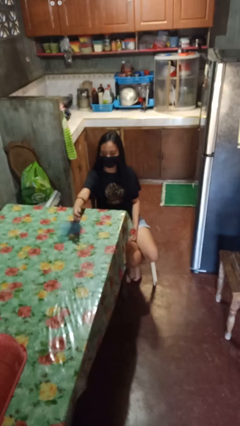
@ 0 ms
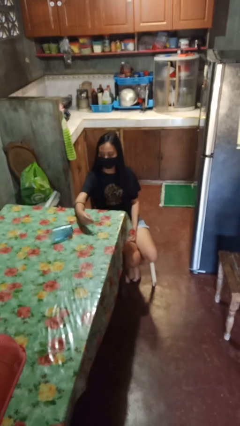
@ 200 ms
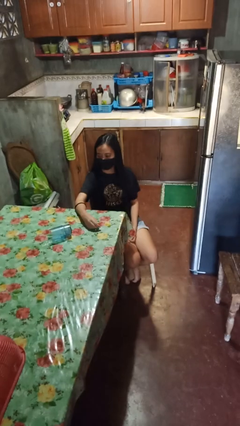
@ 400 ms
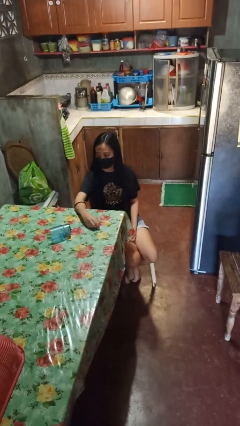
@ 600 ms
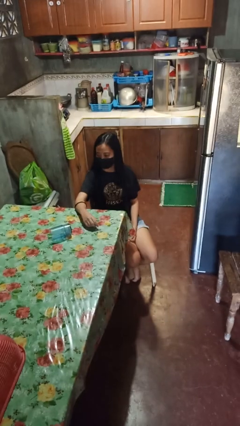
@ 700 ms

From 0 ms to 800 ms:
person spills on table

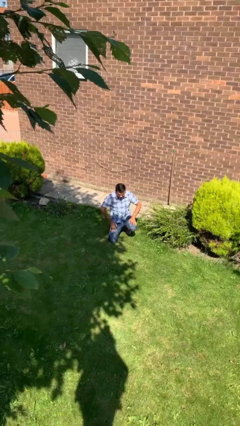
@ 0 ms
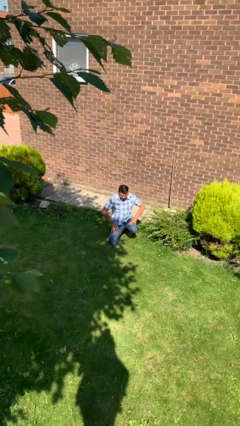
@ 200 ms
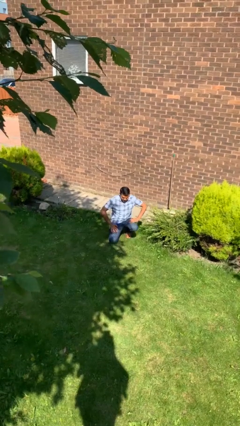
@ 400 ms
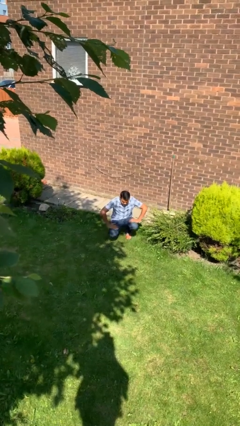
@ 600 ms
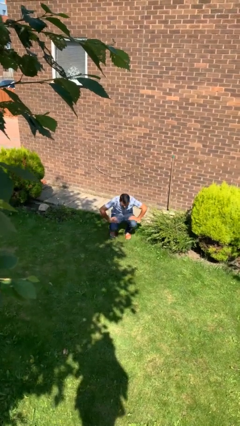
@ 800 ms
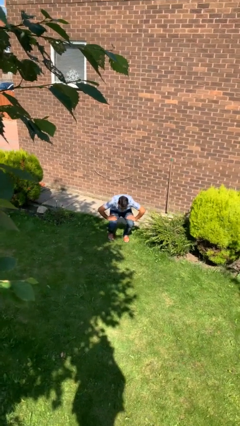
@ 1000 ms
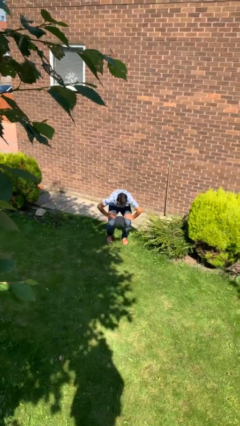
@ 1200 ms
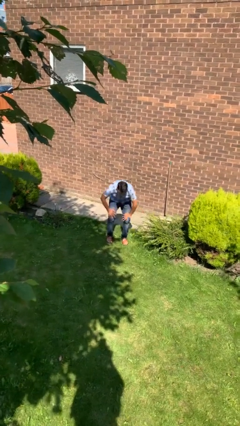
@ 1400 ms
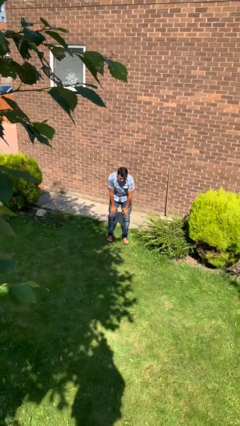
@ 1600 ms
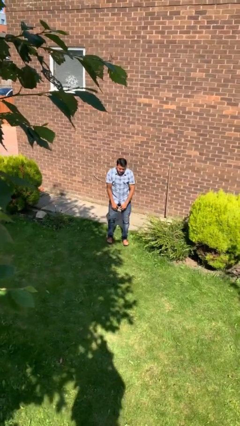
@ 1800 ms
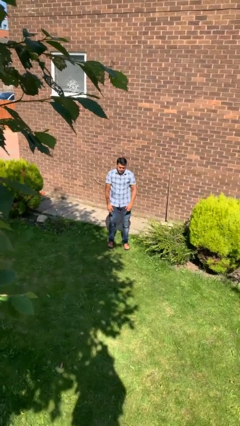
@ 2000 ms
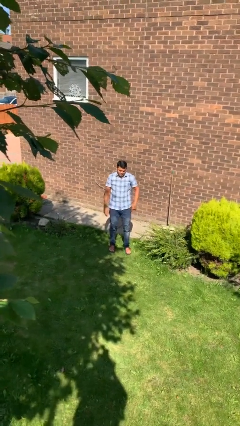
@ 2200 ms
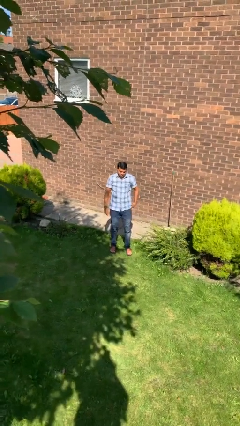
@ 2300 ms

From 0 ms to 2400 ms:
person stands up from floor

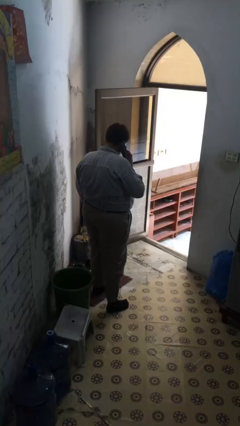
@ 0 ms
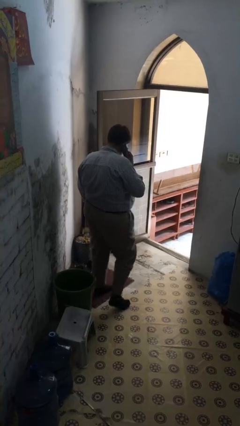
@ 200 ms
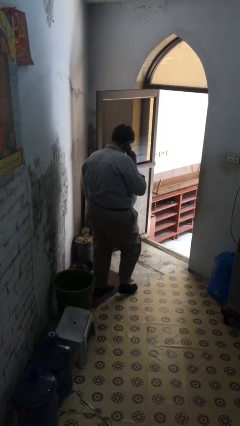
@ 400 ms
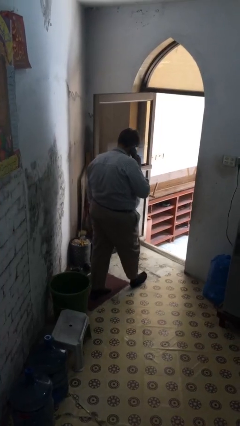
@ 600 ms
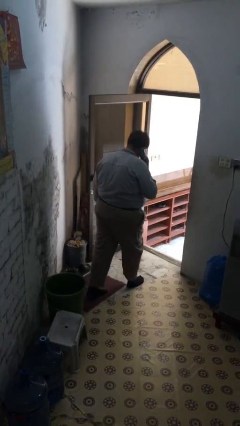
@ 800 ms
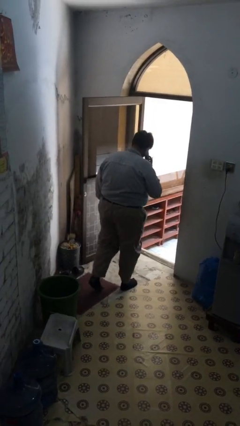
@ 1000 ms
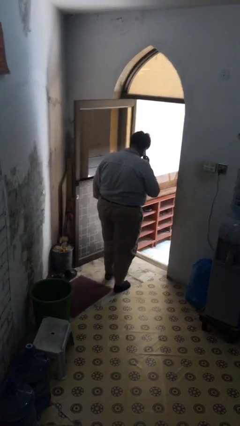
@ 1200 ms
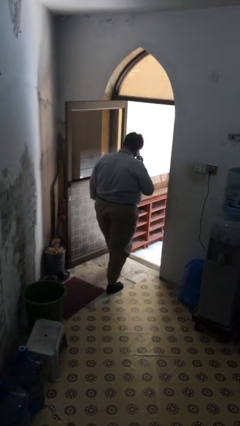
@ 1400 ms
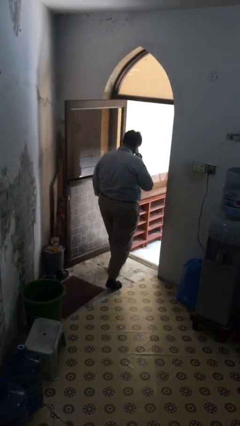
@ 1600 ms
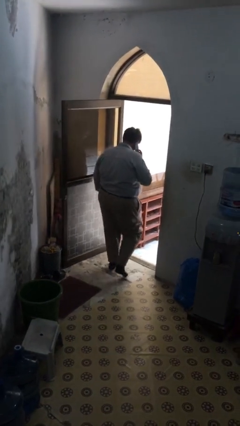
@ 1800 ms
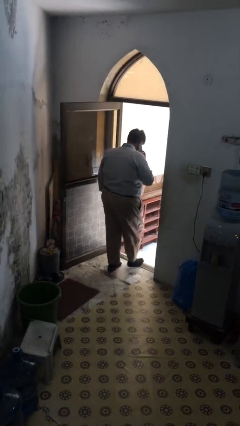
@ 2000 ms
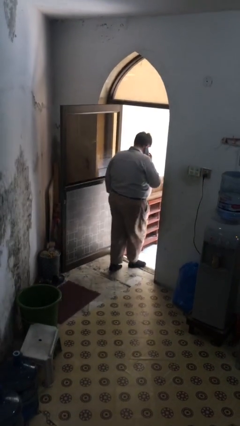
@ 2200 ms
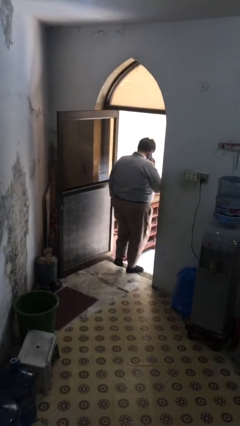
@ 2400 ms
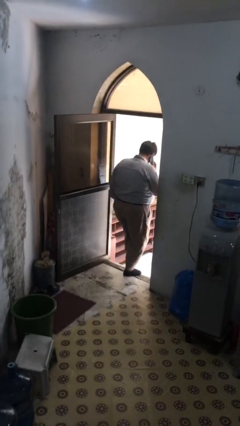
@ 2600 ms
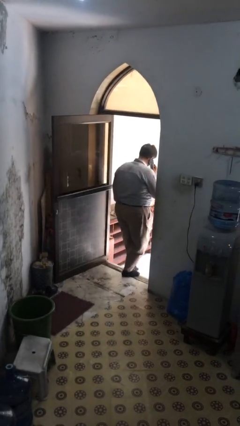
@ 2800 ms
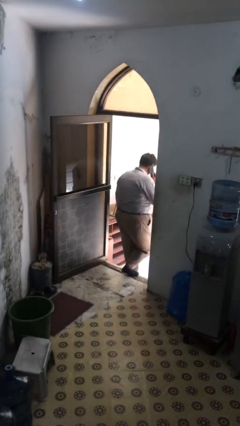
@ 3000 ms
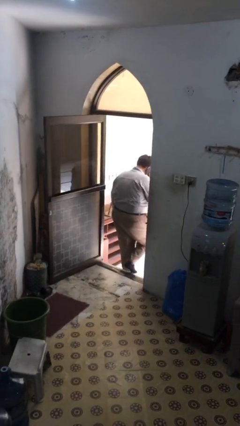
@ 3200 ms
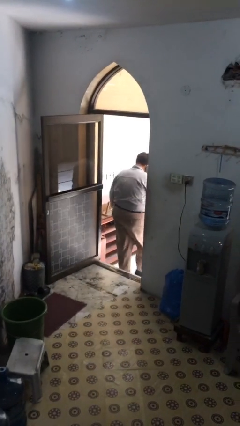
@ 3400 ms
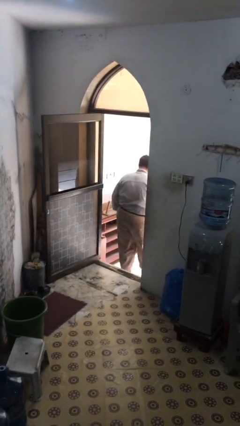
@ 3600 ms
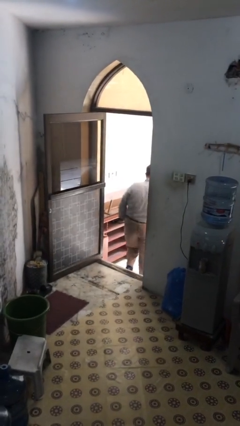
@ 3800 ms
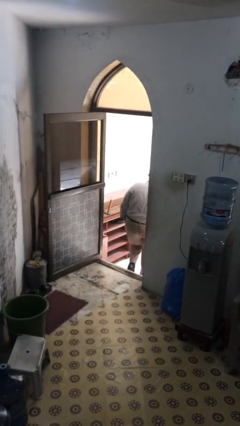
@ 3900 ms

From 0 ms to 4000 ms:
person exits scene through structure

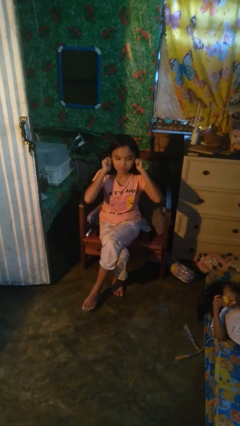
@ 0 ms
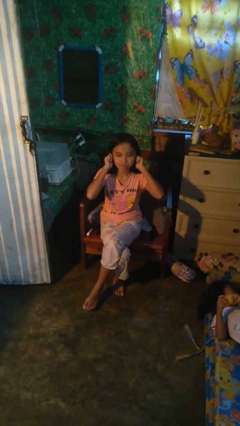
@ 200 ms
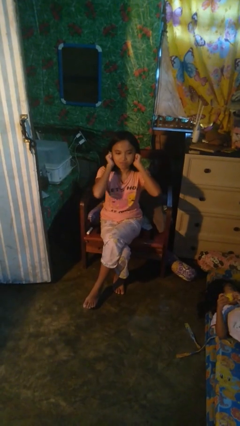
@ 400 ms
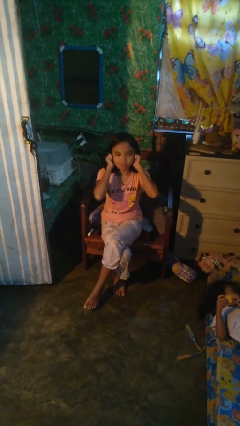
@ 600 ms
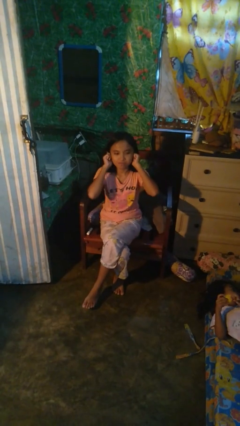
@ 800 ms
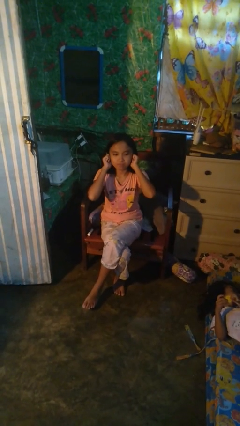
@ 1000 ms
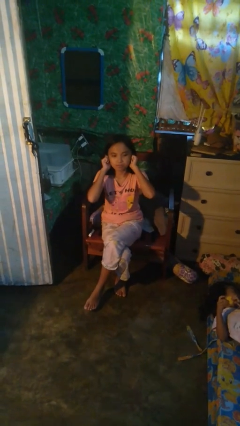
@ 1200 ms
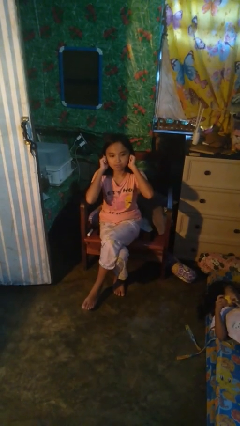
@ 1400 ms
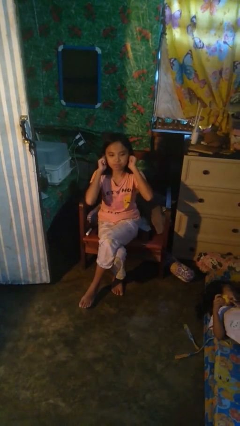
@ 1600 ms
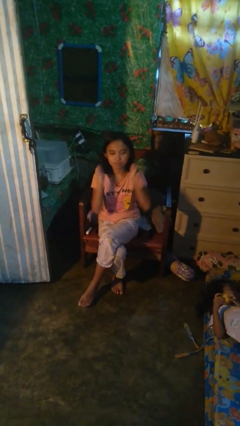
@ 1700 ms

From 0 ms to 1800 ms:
person puts fingers in ear

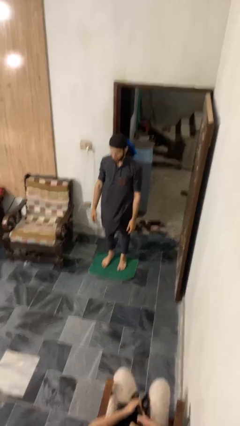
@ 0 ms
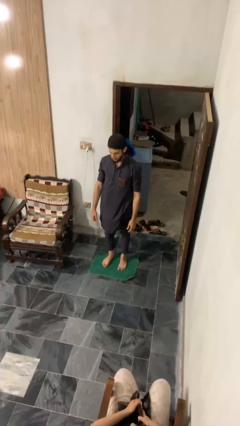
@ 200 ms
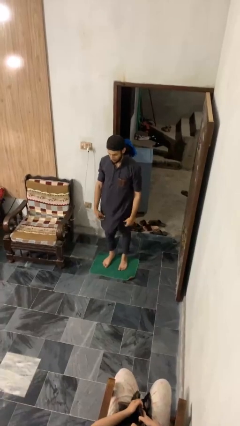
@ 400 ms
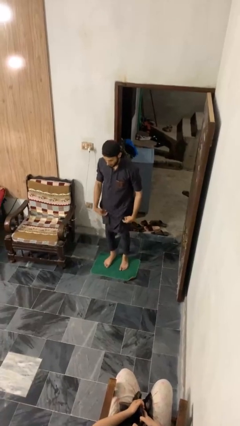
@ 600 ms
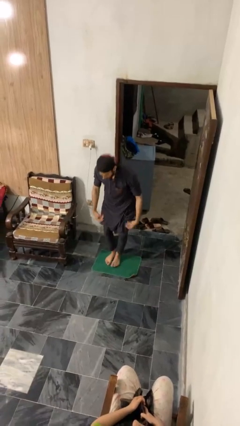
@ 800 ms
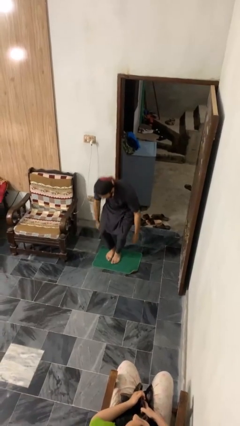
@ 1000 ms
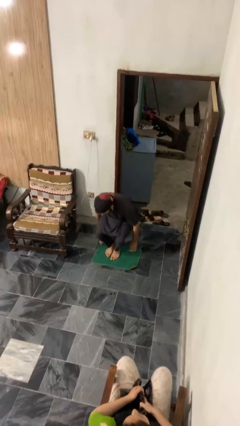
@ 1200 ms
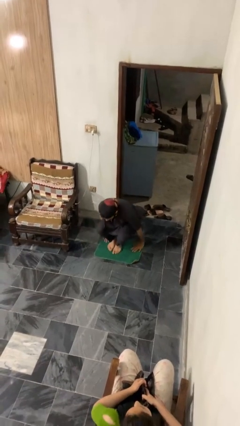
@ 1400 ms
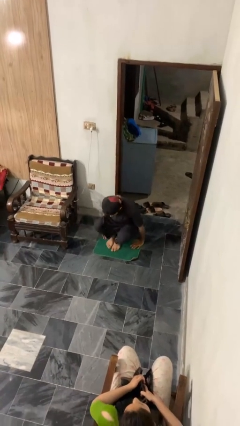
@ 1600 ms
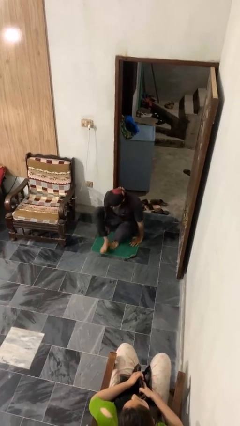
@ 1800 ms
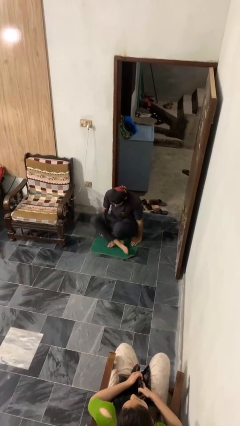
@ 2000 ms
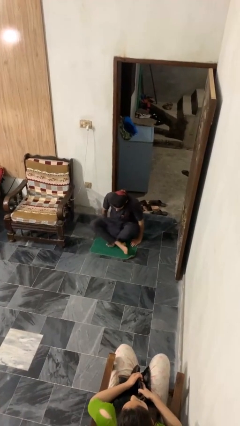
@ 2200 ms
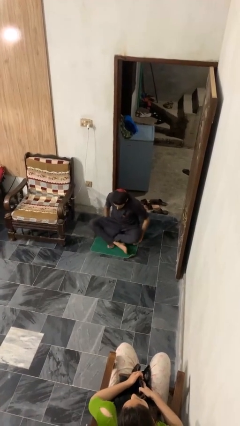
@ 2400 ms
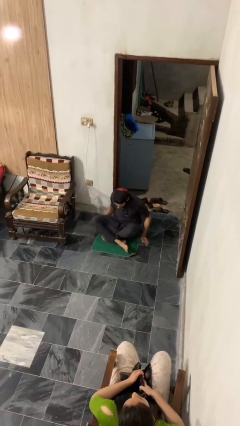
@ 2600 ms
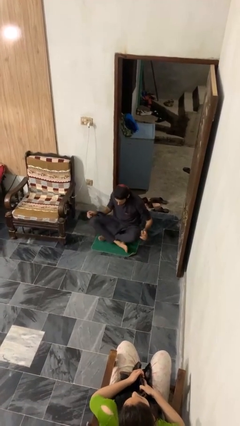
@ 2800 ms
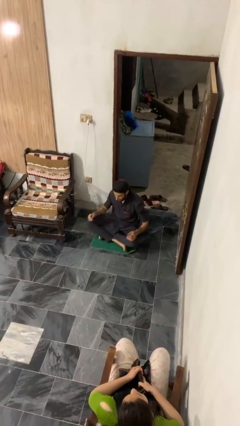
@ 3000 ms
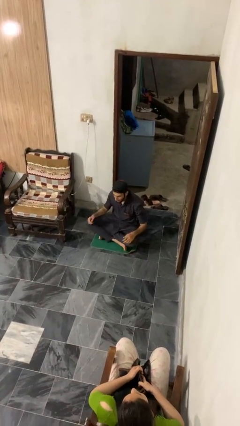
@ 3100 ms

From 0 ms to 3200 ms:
person sits crisscross

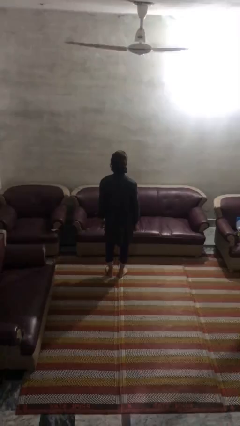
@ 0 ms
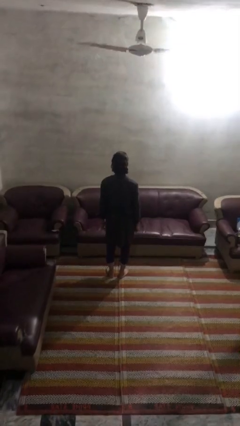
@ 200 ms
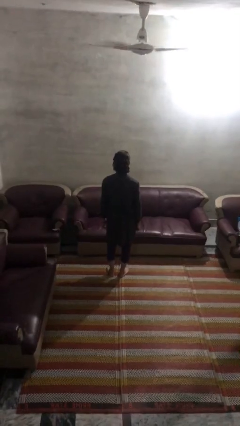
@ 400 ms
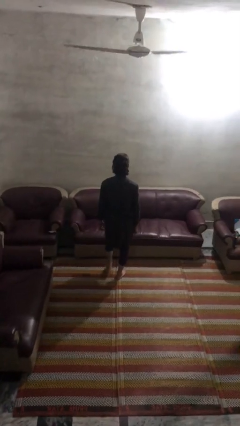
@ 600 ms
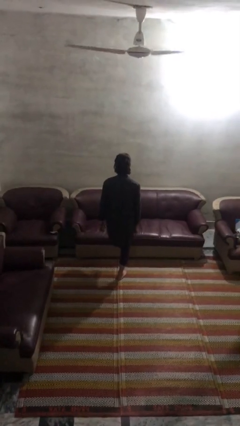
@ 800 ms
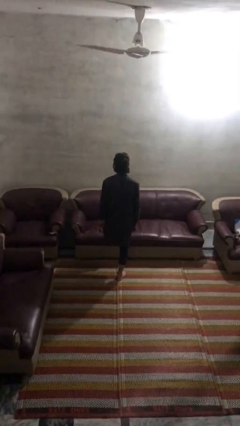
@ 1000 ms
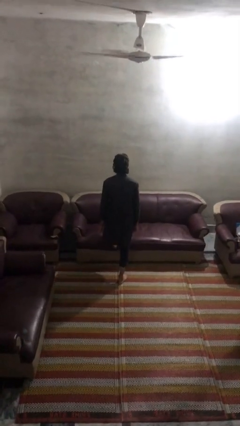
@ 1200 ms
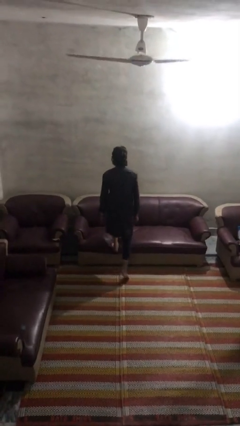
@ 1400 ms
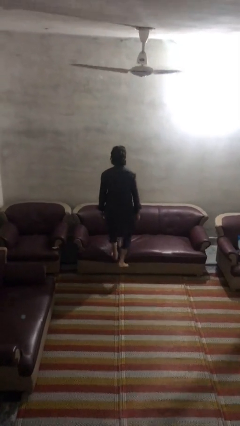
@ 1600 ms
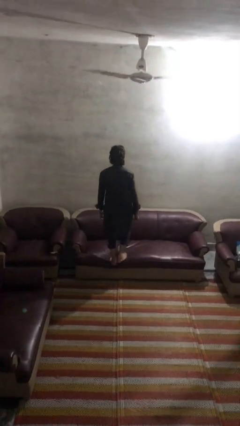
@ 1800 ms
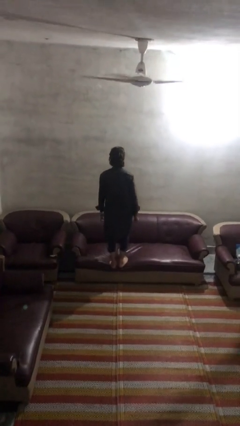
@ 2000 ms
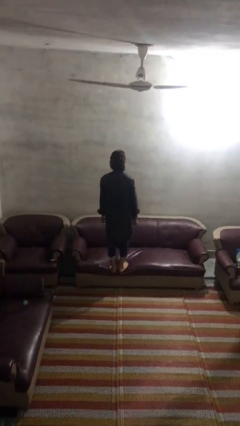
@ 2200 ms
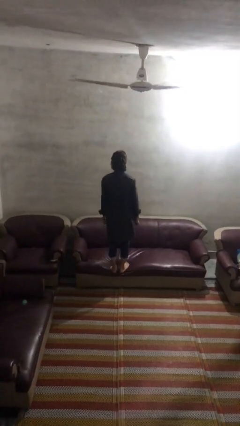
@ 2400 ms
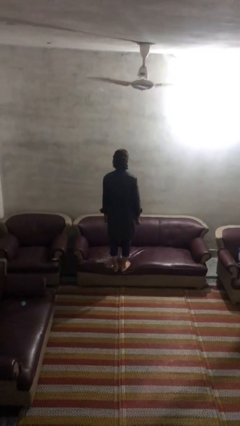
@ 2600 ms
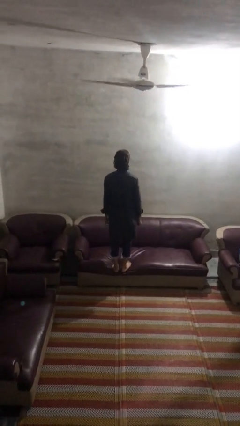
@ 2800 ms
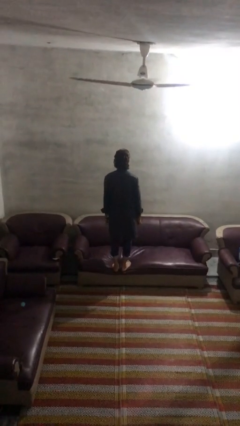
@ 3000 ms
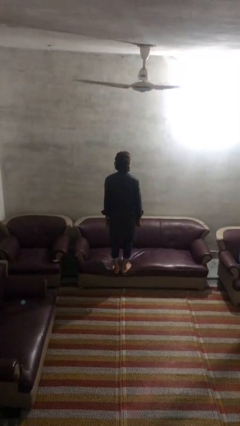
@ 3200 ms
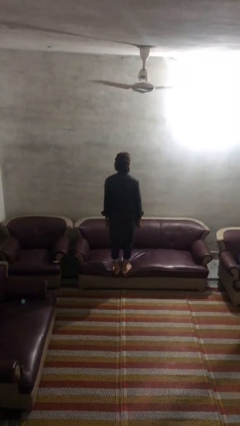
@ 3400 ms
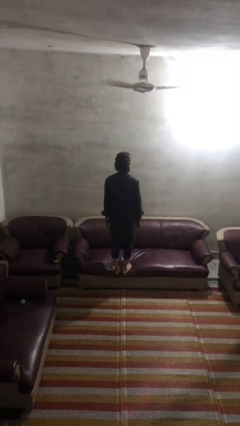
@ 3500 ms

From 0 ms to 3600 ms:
person climbs on couch

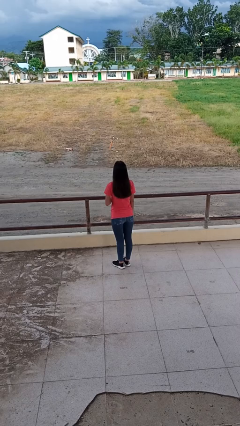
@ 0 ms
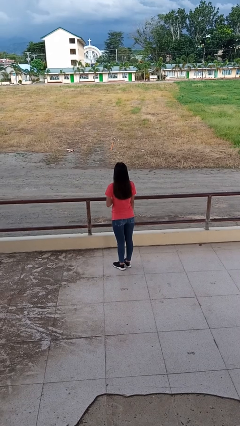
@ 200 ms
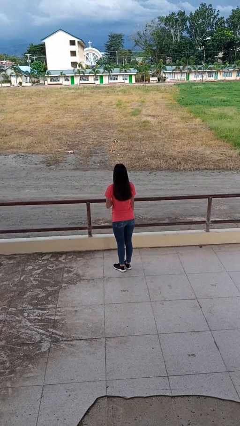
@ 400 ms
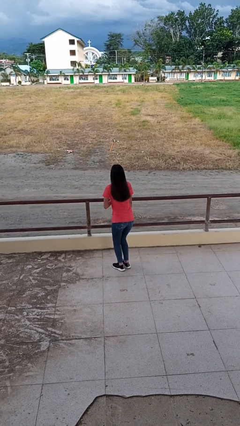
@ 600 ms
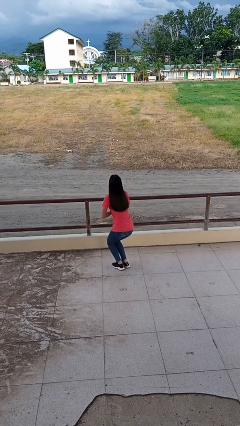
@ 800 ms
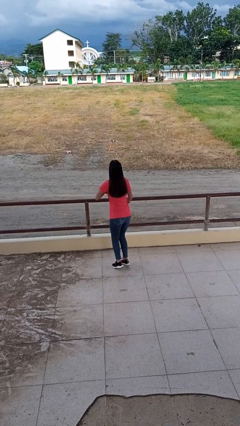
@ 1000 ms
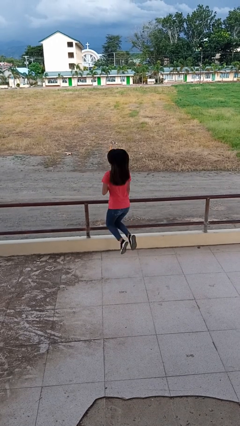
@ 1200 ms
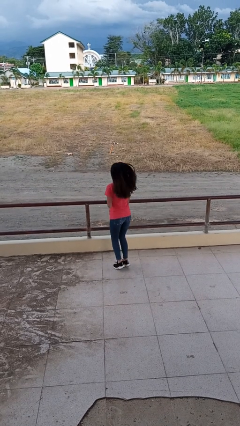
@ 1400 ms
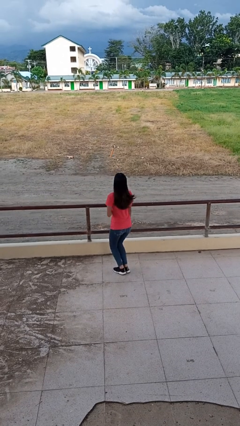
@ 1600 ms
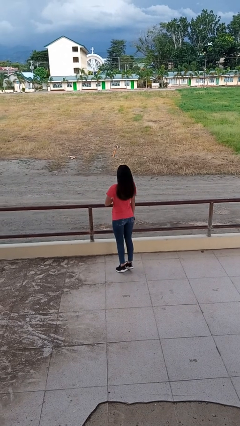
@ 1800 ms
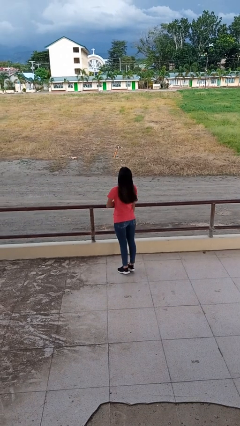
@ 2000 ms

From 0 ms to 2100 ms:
person jumps
